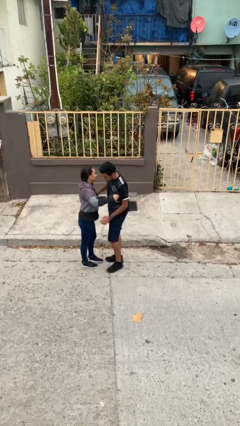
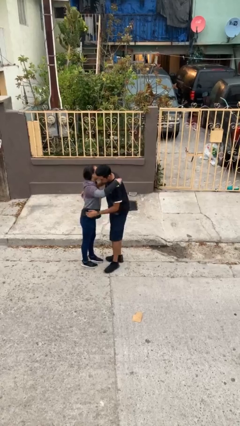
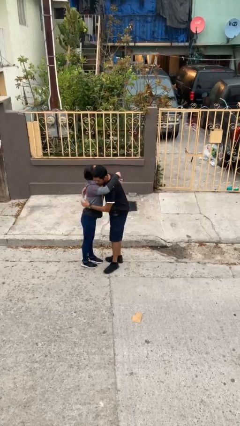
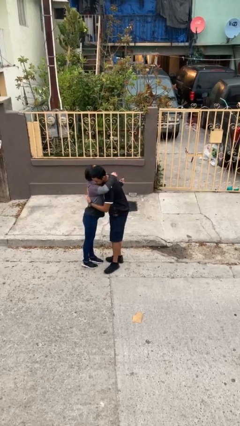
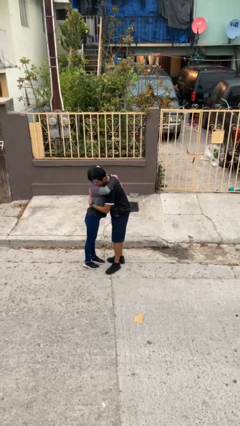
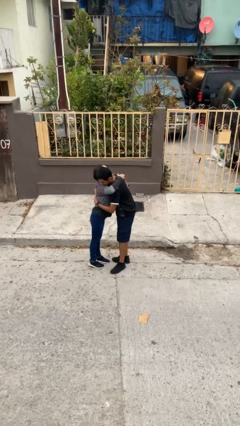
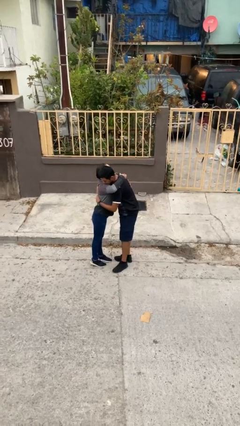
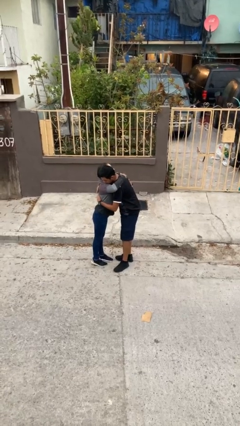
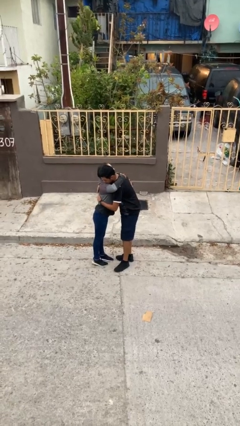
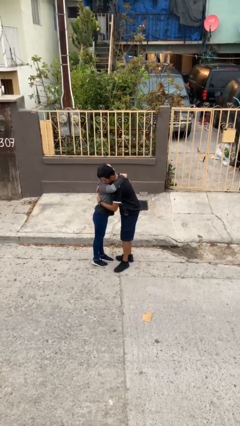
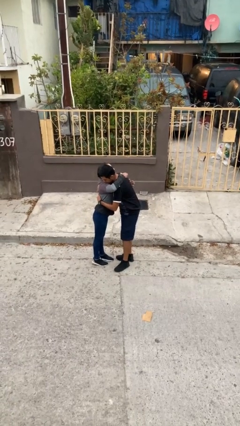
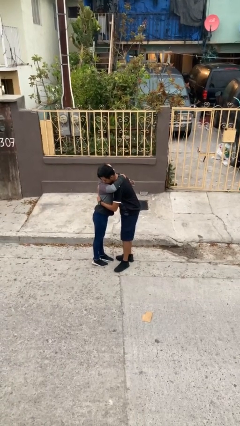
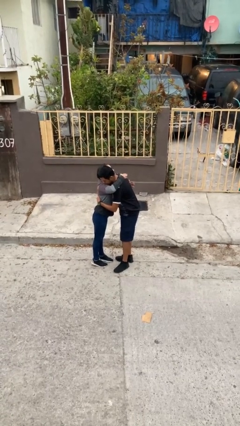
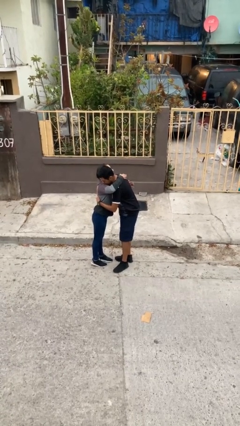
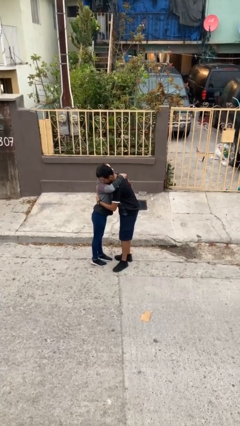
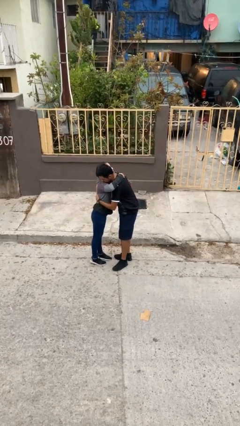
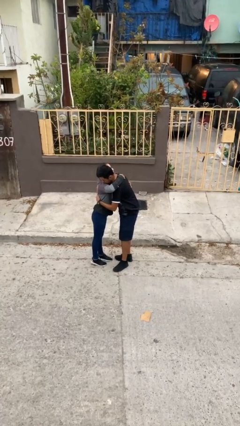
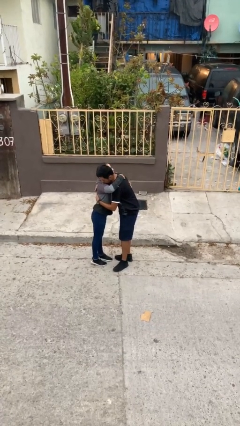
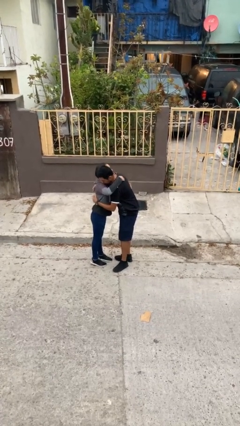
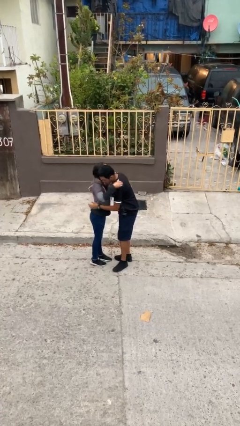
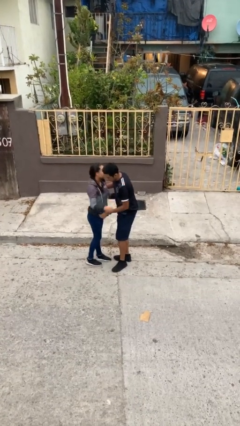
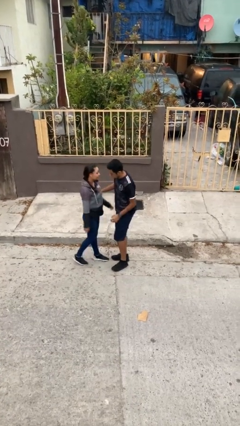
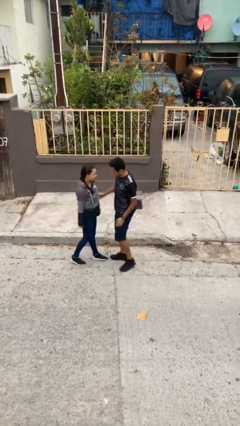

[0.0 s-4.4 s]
person embraces person

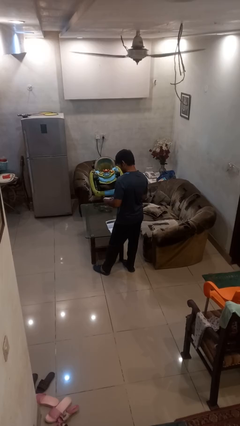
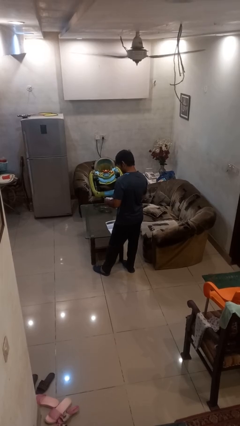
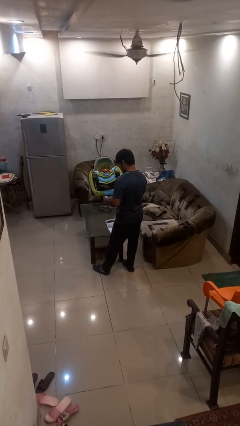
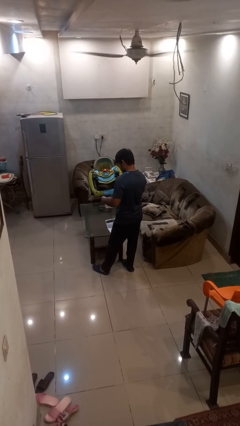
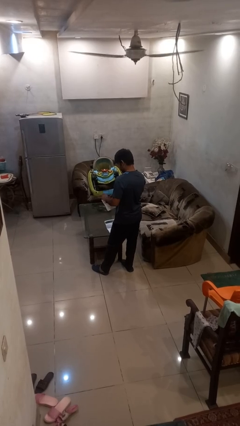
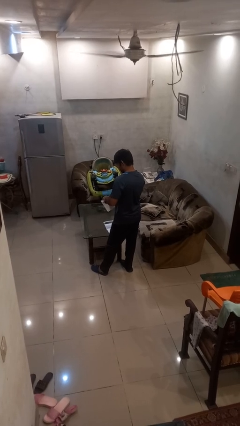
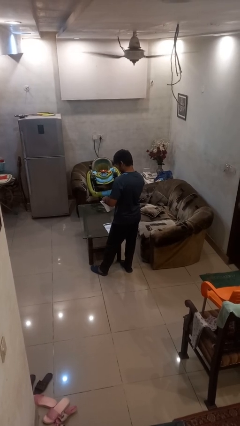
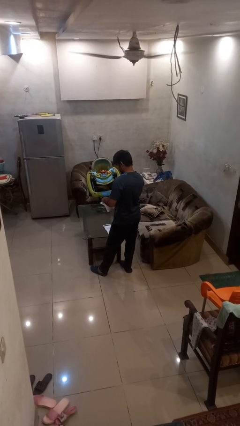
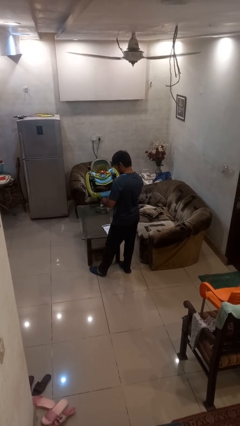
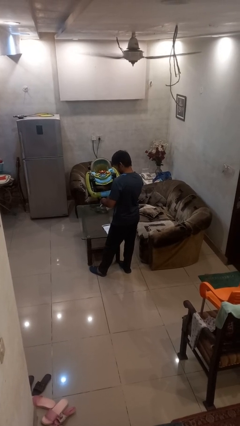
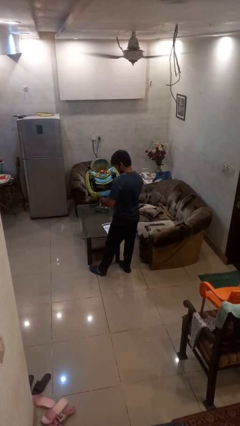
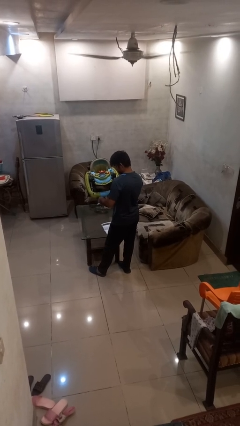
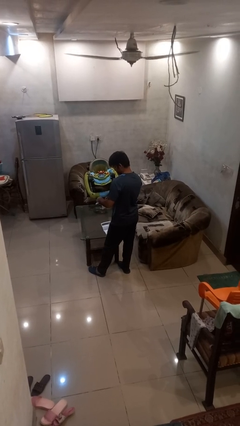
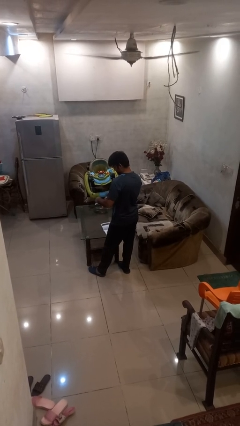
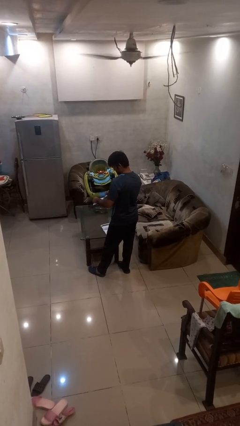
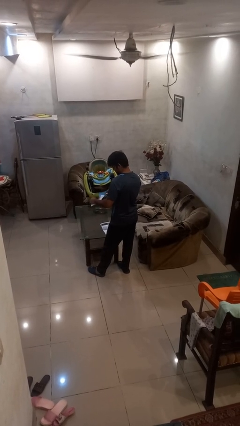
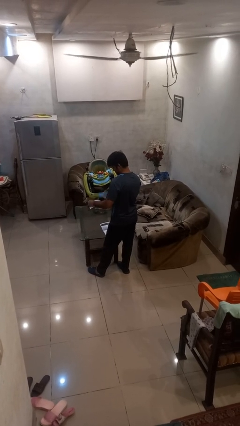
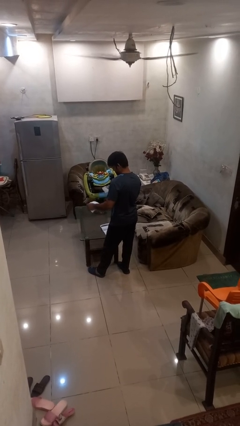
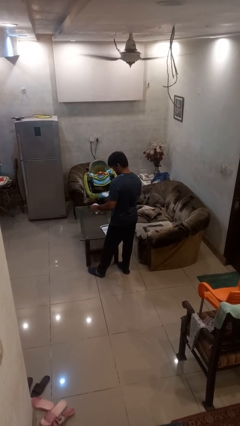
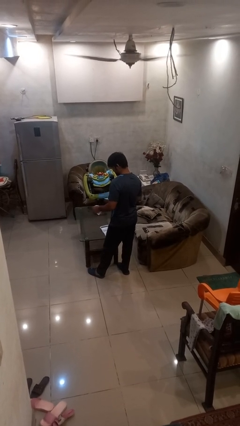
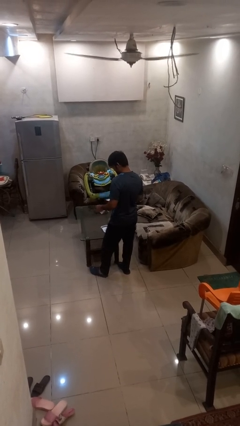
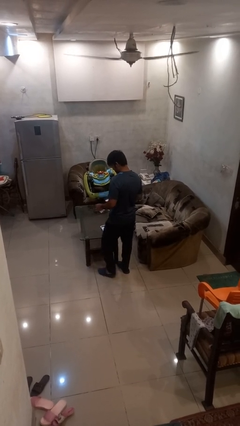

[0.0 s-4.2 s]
person tears paper

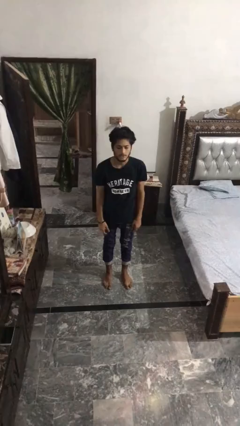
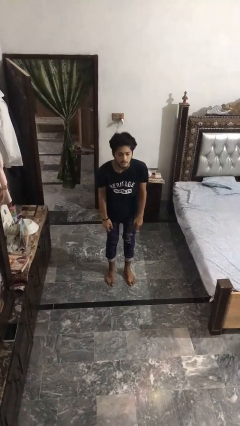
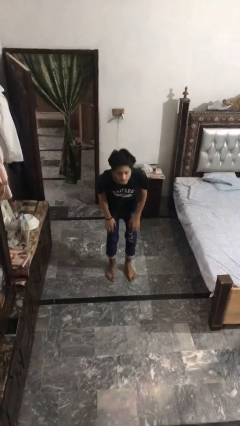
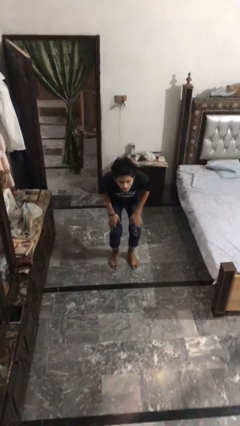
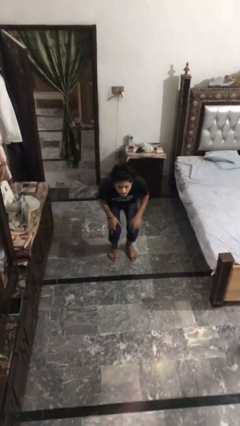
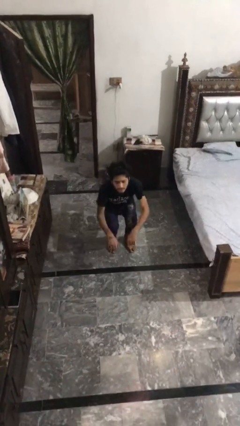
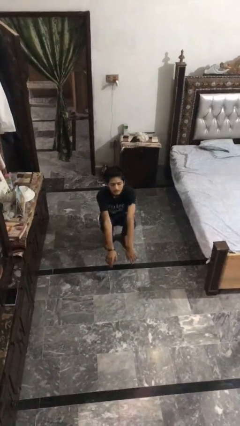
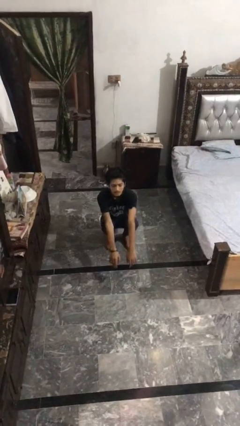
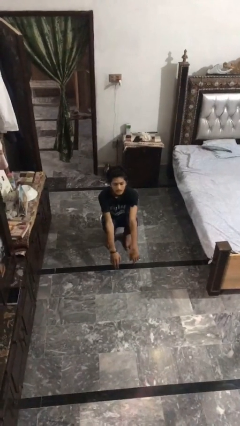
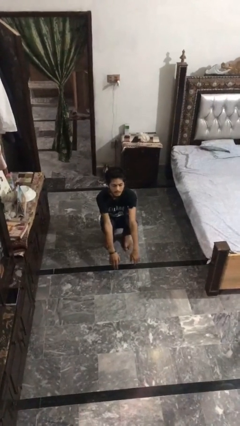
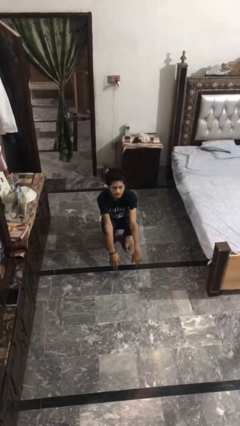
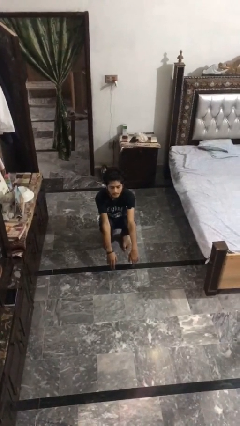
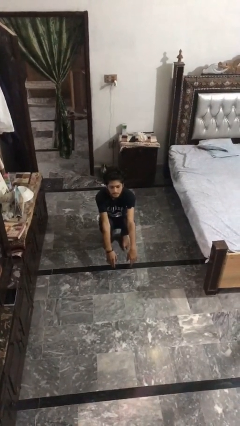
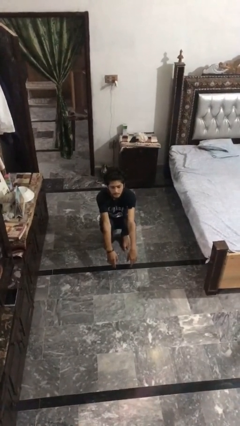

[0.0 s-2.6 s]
person squats

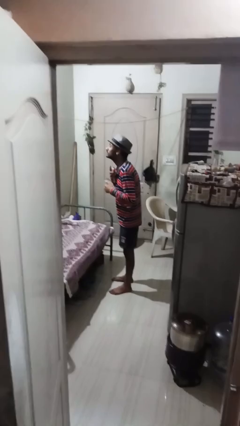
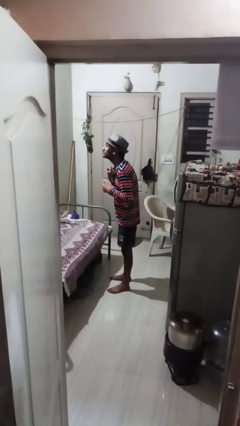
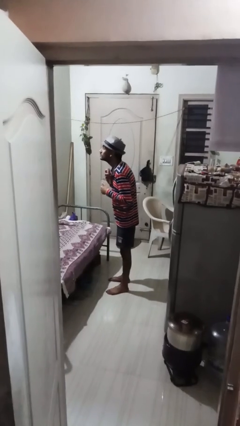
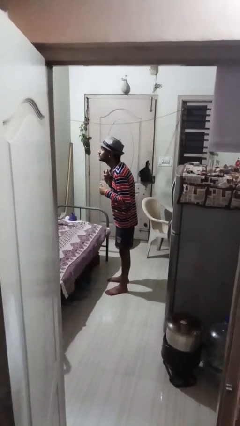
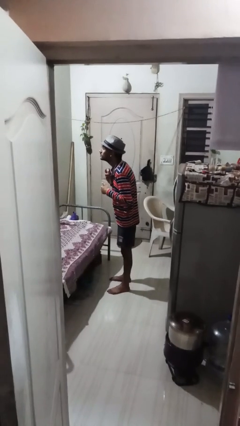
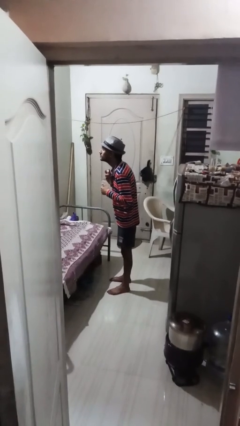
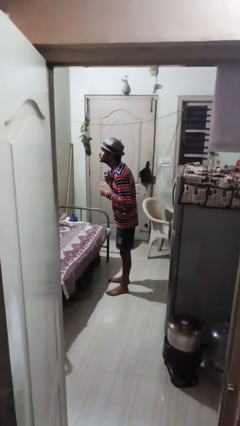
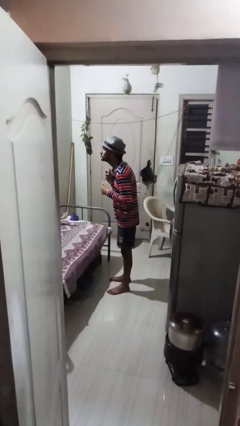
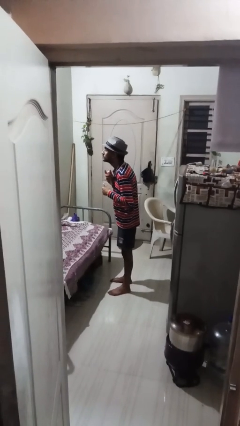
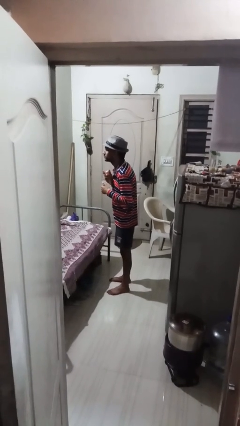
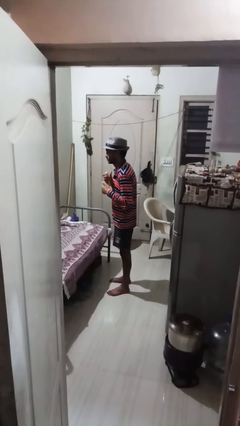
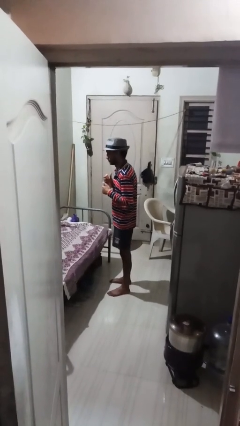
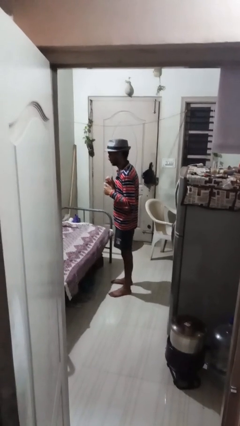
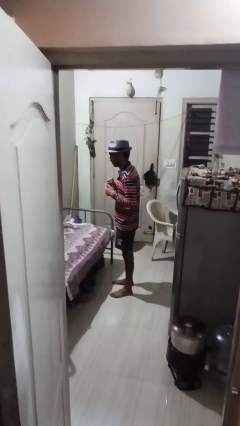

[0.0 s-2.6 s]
person applies deodorant

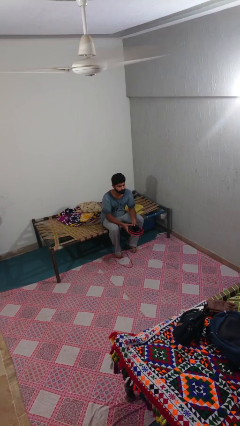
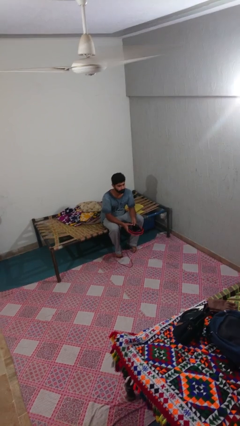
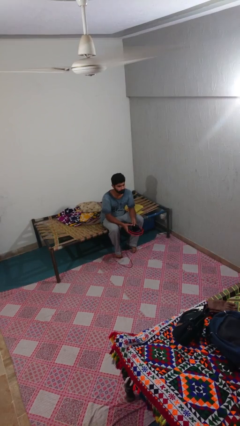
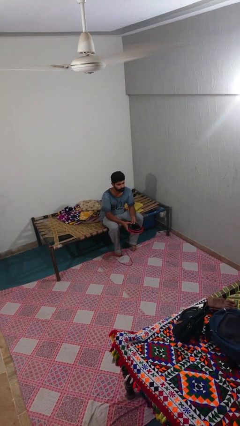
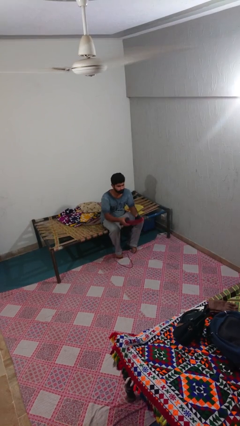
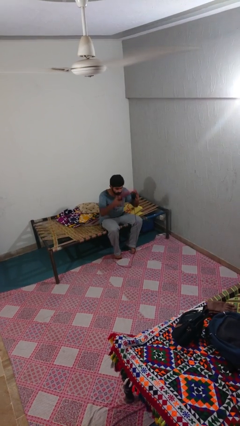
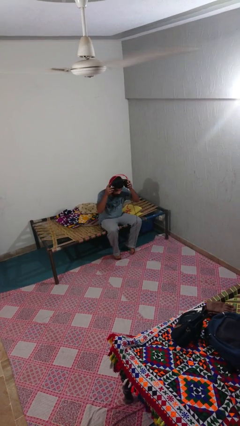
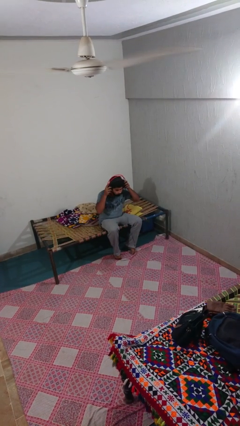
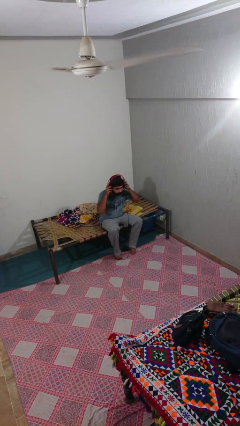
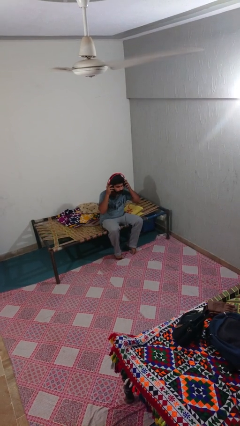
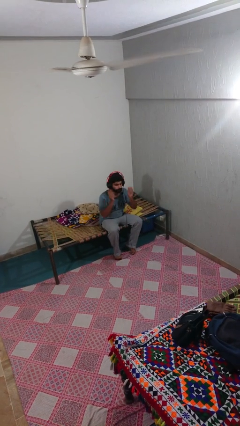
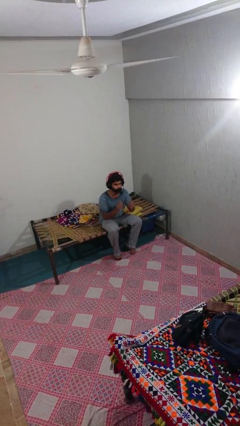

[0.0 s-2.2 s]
person puts on headphones

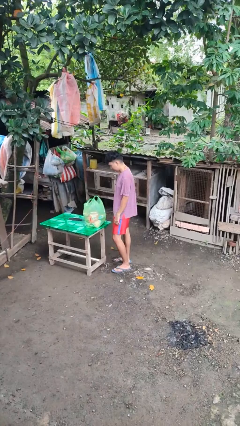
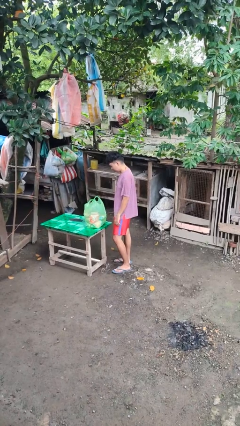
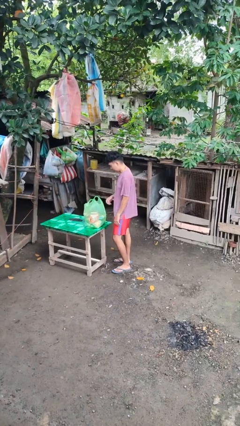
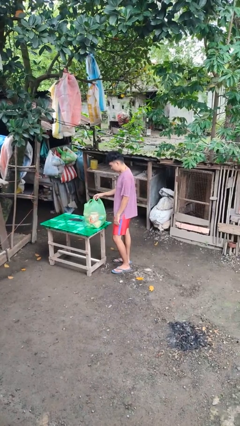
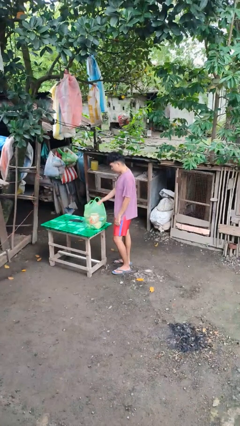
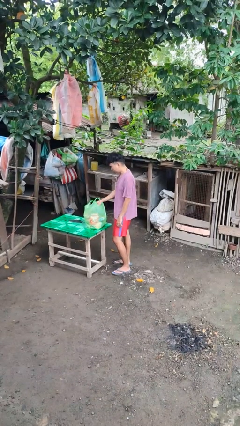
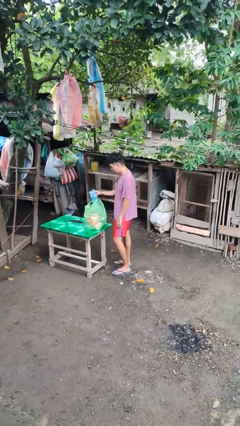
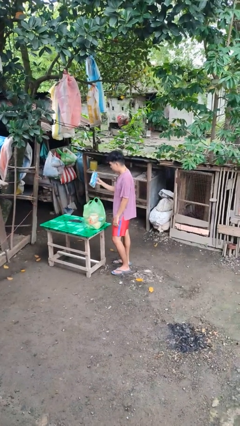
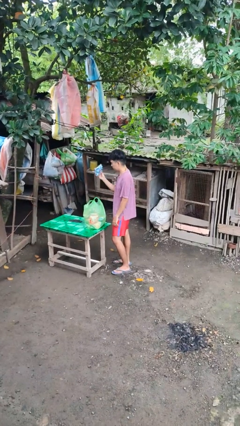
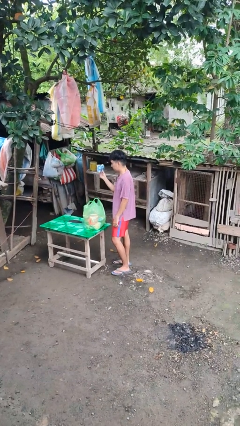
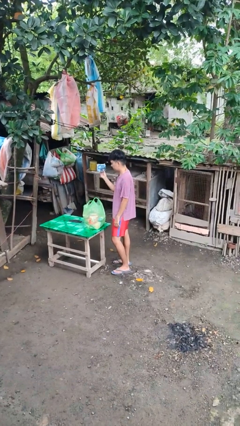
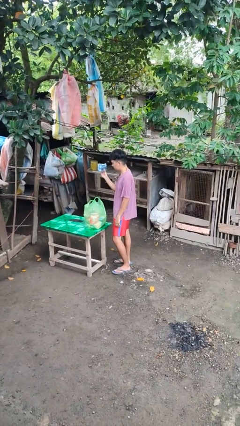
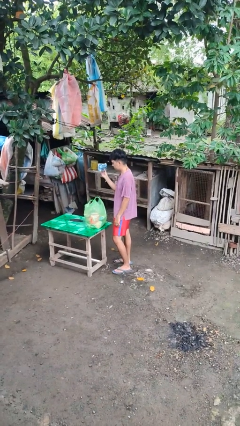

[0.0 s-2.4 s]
person takes object from bag
